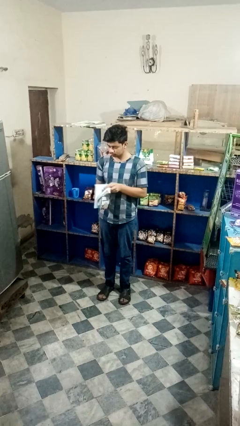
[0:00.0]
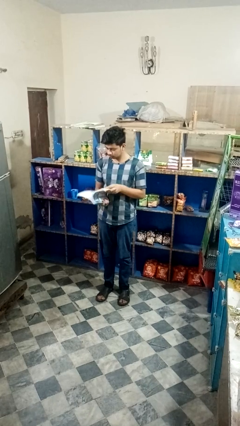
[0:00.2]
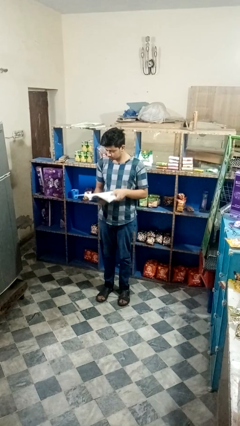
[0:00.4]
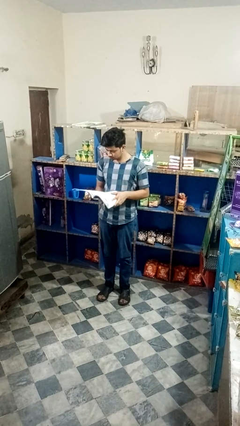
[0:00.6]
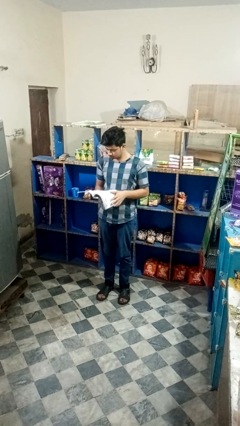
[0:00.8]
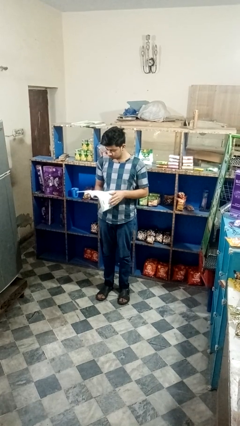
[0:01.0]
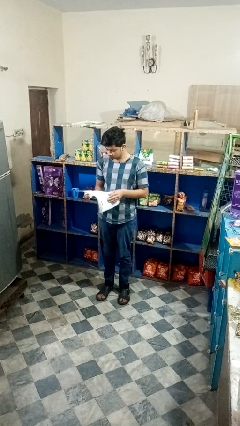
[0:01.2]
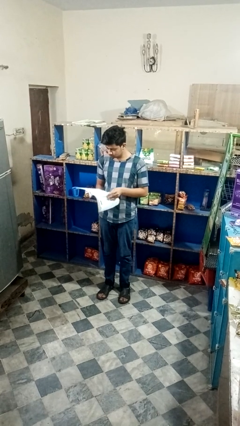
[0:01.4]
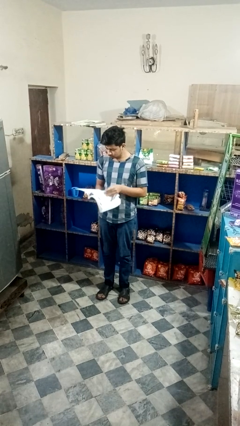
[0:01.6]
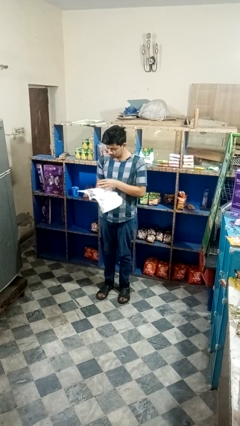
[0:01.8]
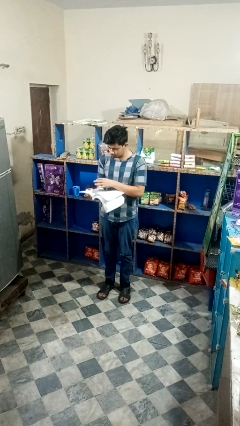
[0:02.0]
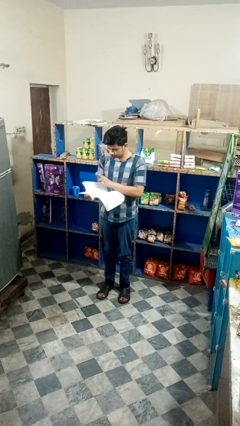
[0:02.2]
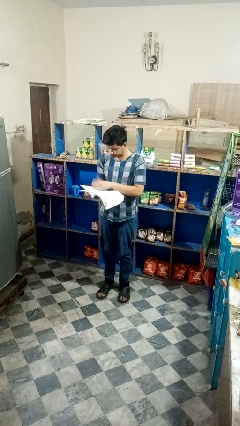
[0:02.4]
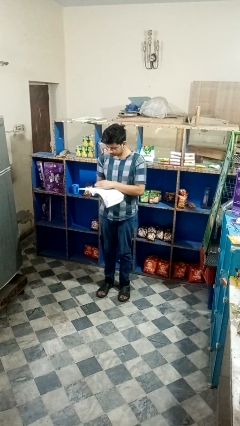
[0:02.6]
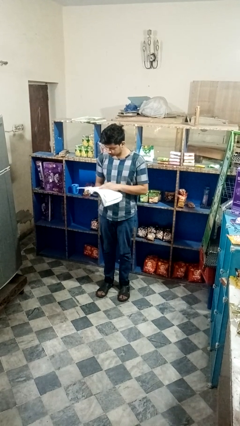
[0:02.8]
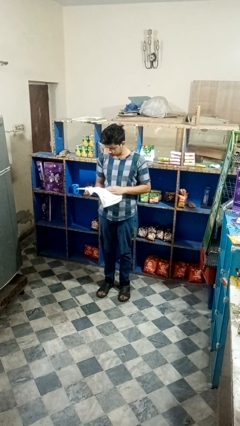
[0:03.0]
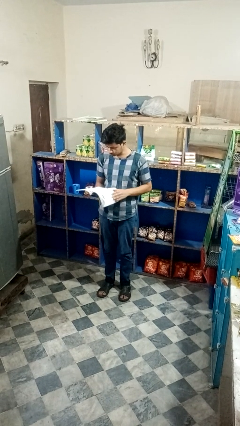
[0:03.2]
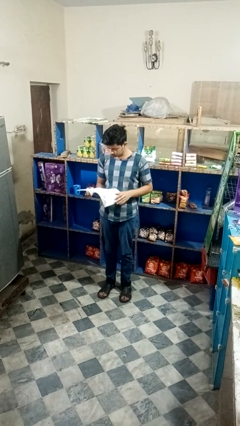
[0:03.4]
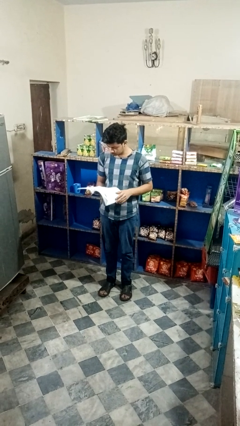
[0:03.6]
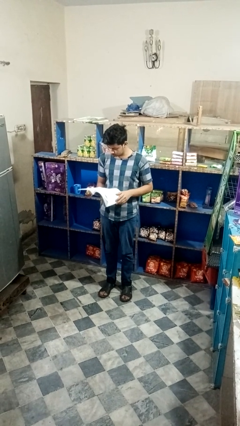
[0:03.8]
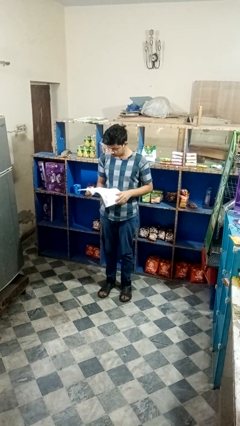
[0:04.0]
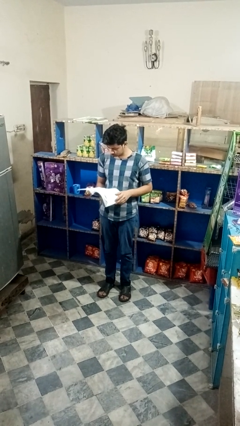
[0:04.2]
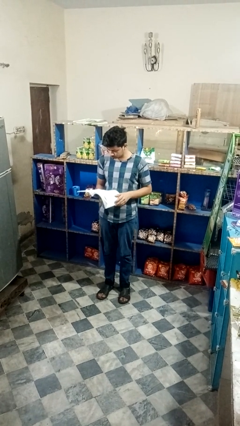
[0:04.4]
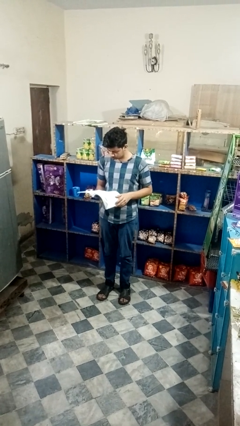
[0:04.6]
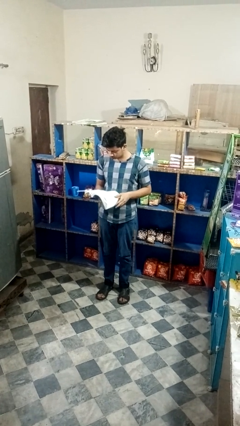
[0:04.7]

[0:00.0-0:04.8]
person reads book

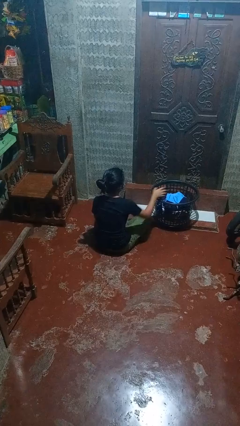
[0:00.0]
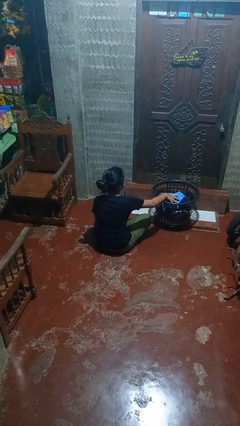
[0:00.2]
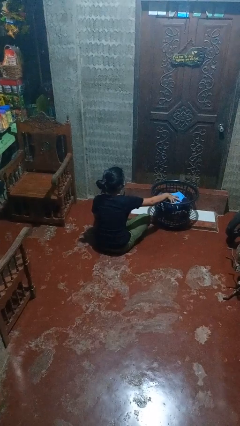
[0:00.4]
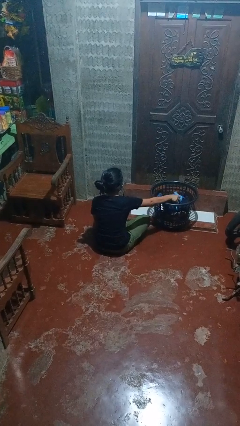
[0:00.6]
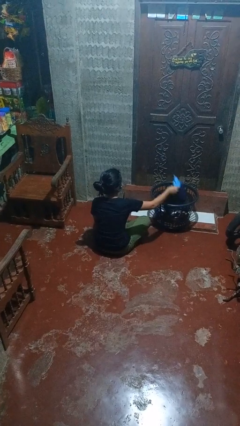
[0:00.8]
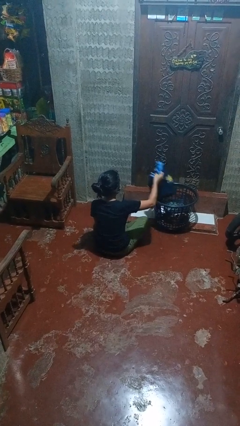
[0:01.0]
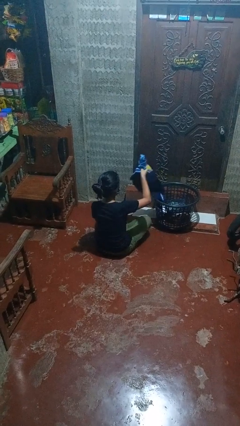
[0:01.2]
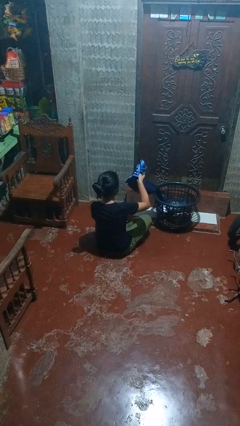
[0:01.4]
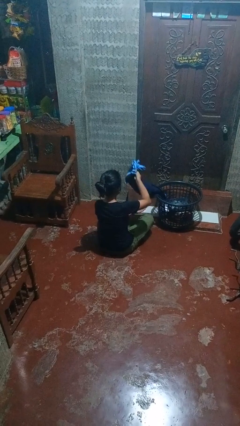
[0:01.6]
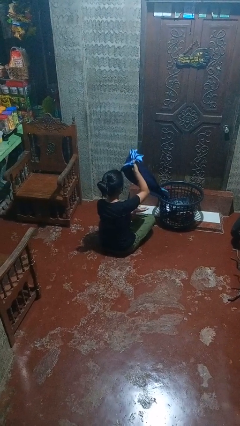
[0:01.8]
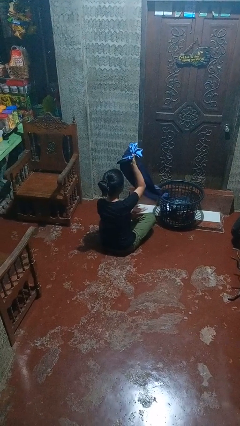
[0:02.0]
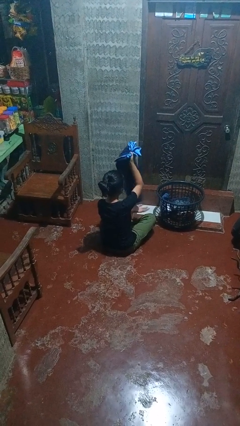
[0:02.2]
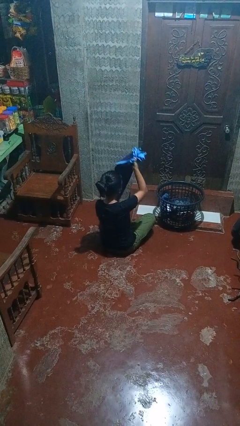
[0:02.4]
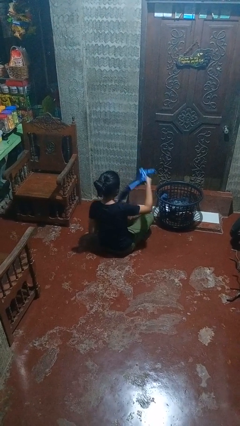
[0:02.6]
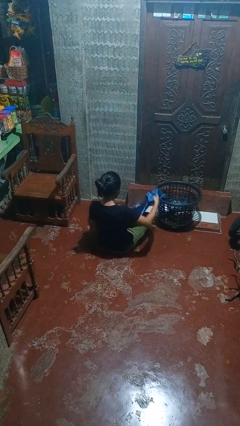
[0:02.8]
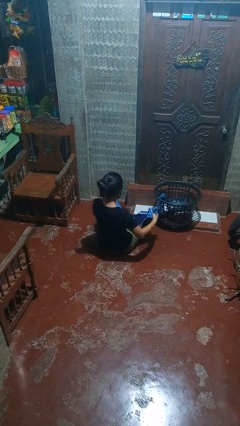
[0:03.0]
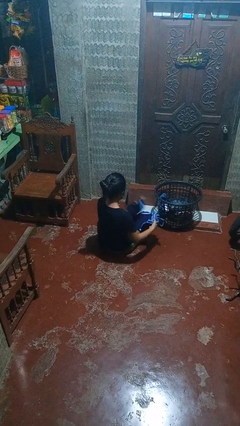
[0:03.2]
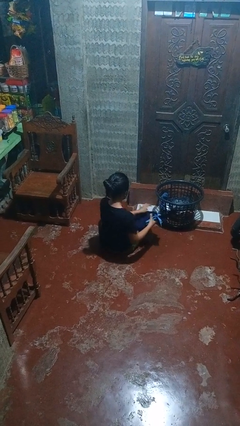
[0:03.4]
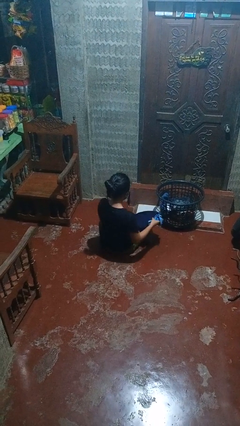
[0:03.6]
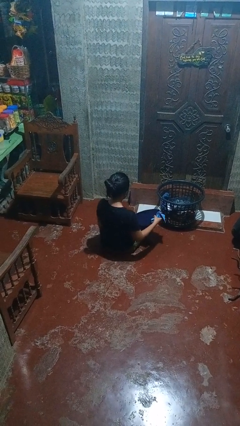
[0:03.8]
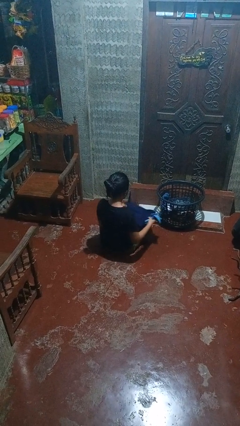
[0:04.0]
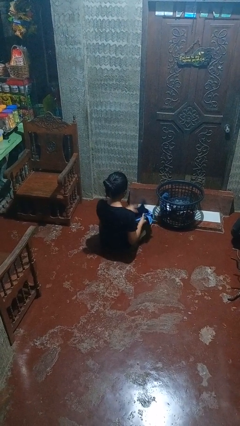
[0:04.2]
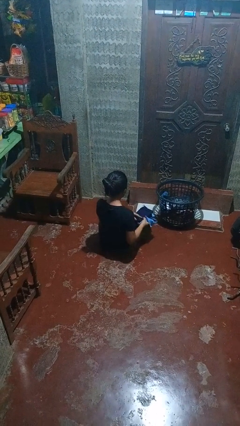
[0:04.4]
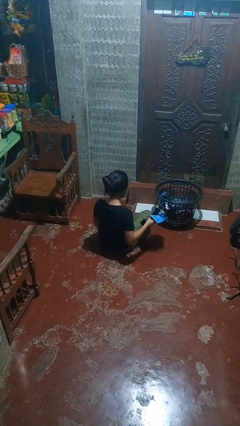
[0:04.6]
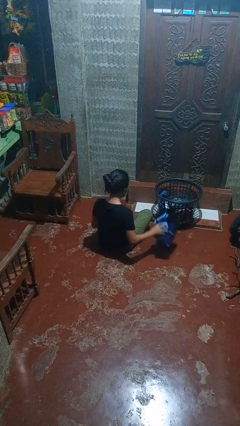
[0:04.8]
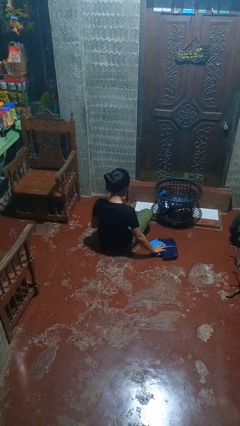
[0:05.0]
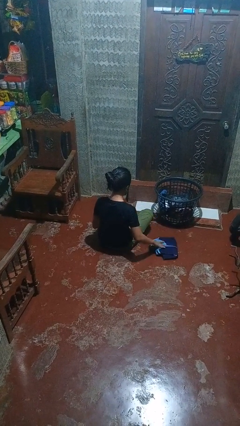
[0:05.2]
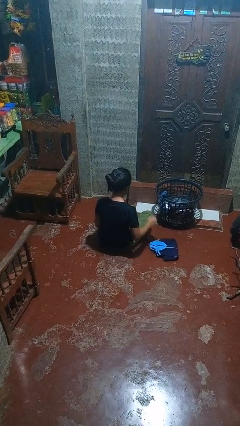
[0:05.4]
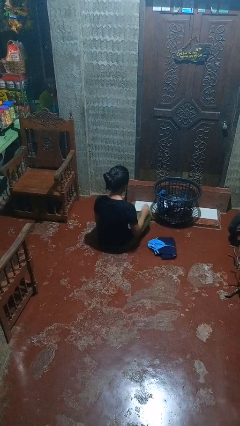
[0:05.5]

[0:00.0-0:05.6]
person folds shirt

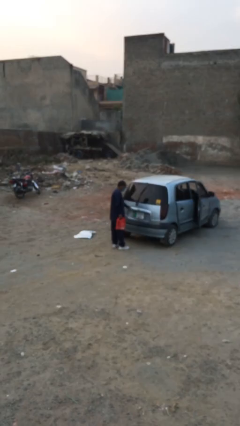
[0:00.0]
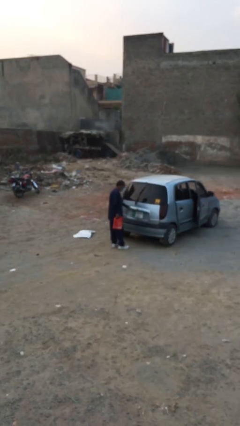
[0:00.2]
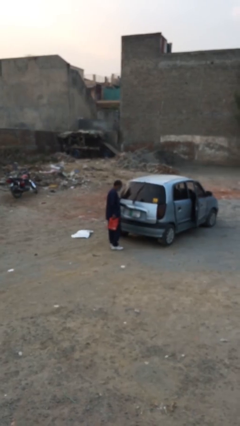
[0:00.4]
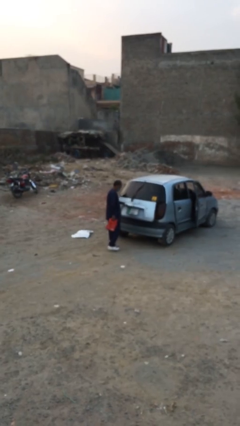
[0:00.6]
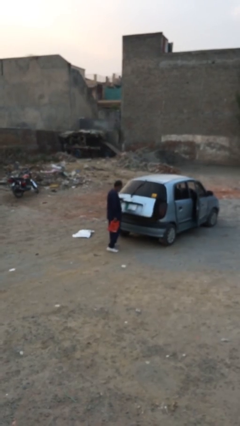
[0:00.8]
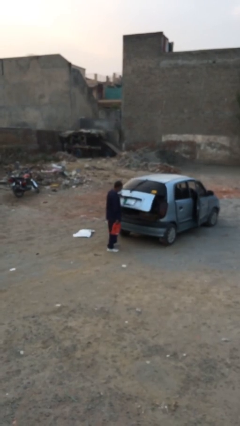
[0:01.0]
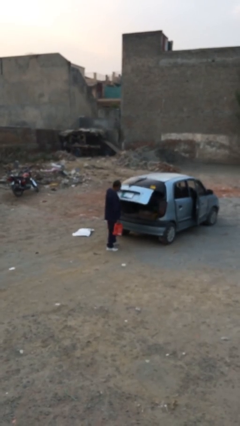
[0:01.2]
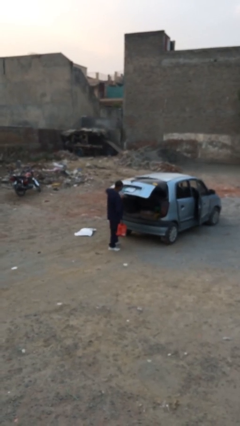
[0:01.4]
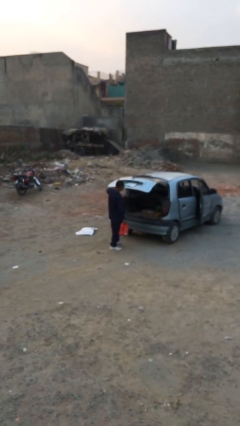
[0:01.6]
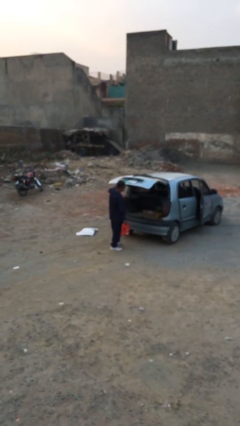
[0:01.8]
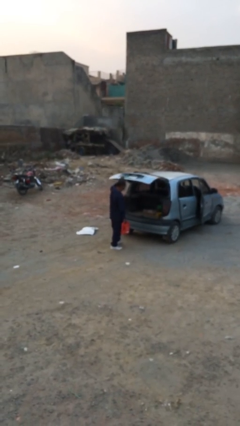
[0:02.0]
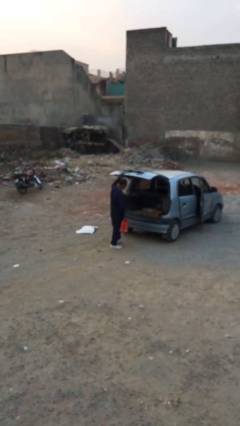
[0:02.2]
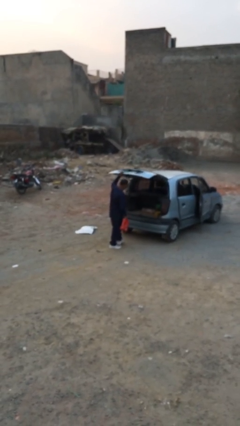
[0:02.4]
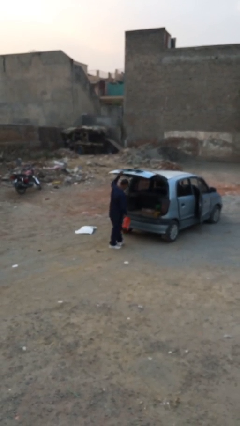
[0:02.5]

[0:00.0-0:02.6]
person opens car trunk

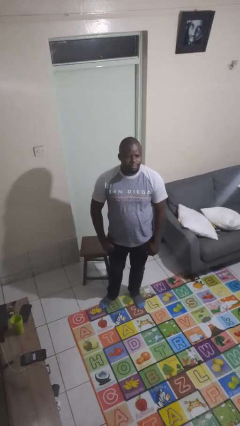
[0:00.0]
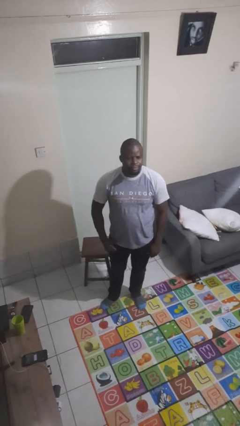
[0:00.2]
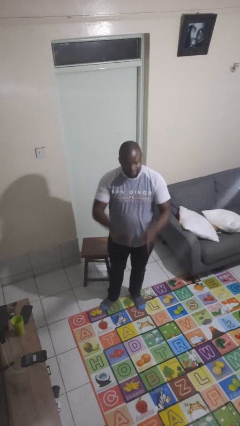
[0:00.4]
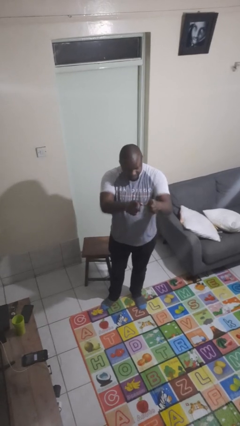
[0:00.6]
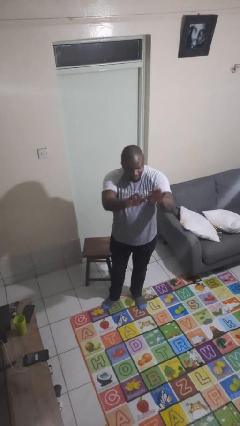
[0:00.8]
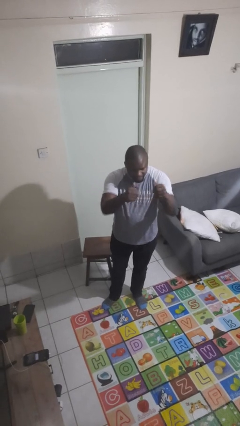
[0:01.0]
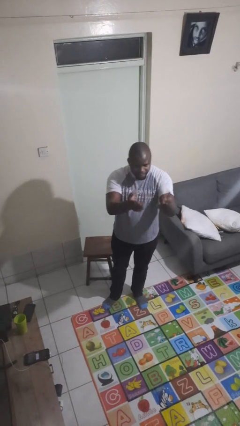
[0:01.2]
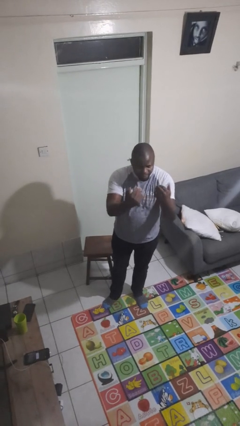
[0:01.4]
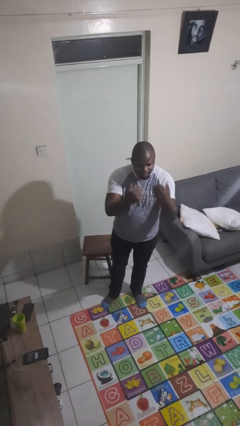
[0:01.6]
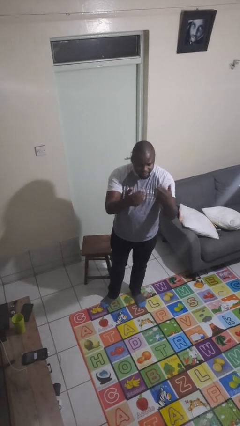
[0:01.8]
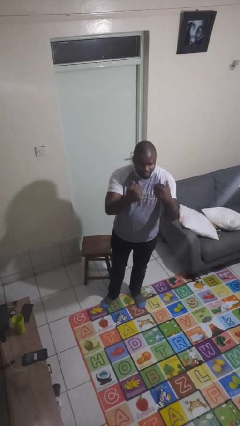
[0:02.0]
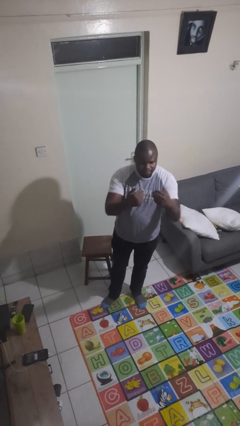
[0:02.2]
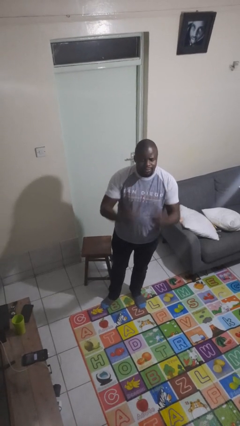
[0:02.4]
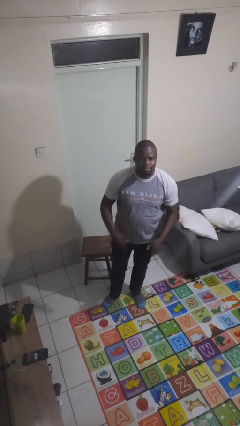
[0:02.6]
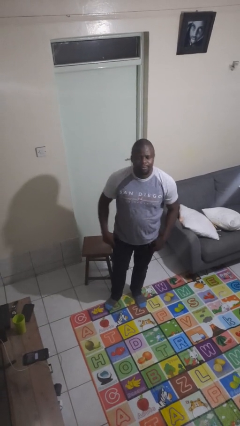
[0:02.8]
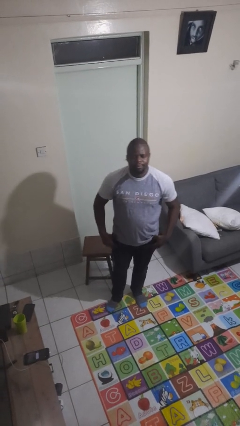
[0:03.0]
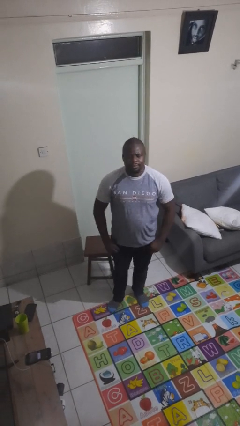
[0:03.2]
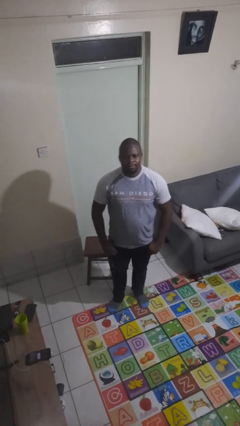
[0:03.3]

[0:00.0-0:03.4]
person gestures come here

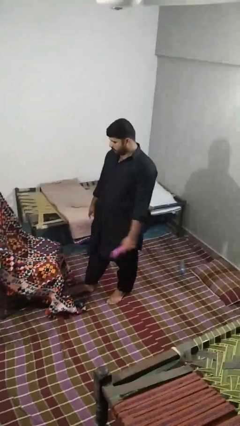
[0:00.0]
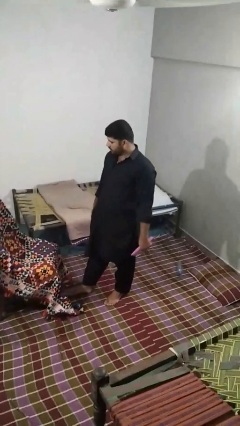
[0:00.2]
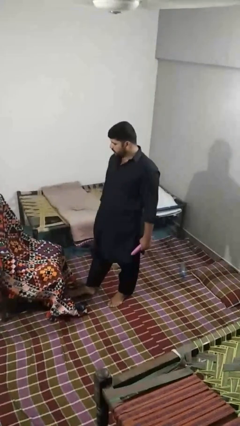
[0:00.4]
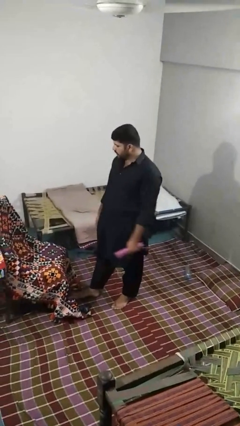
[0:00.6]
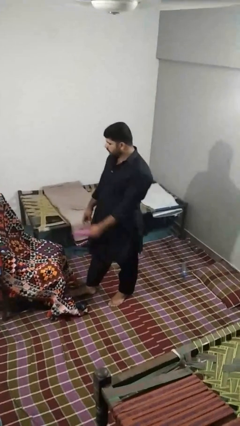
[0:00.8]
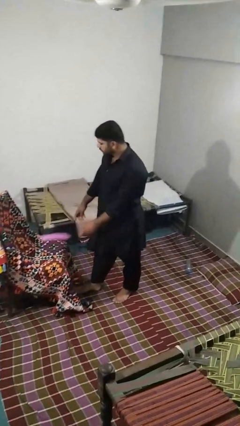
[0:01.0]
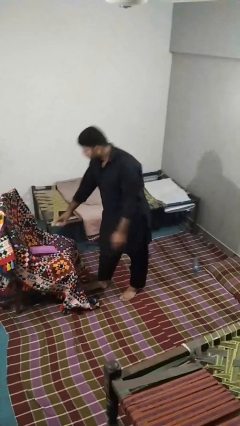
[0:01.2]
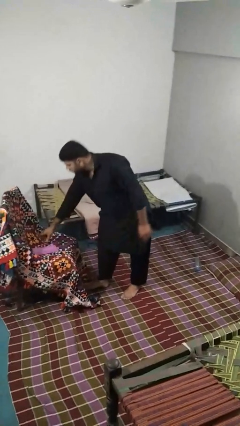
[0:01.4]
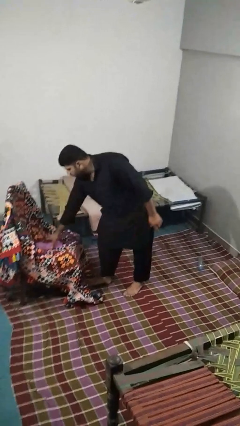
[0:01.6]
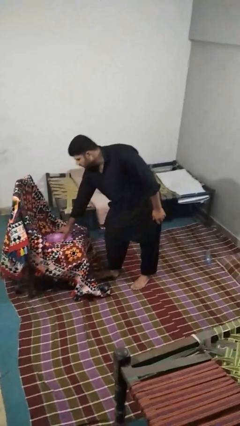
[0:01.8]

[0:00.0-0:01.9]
person puts down object on couch
